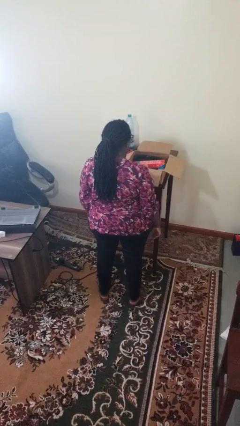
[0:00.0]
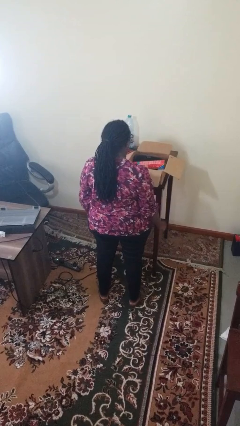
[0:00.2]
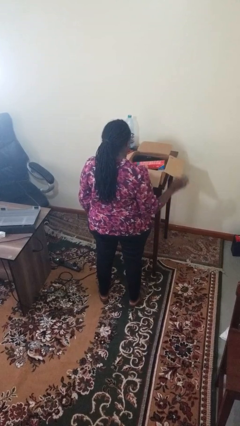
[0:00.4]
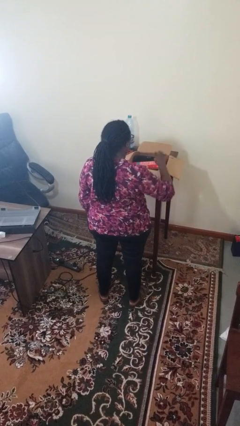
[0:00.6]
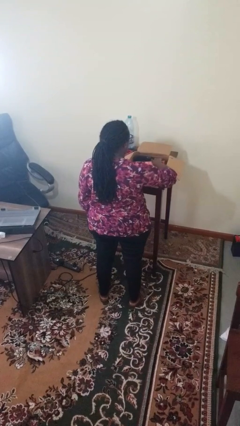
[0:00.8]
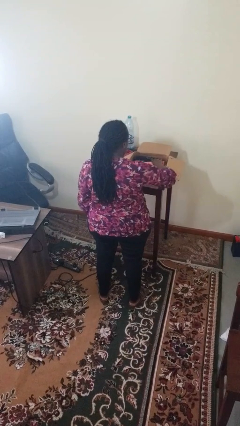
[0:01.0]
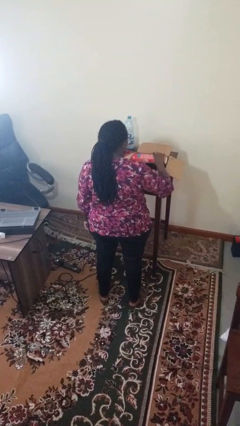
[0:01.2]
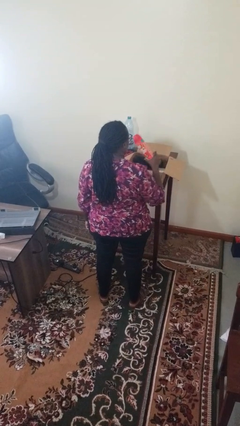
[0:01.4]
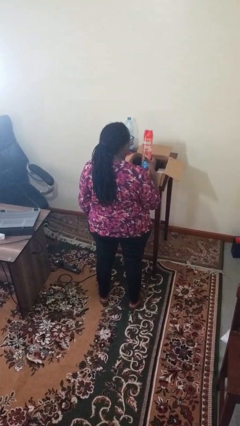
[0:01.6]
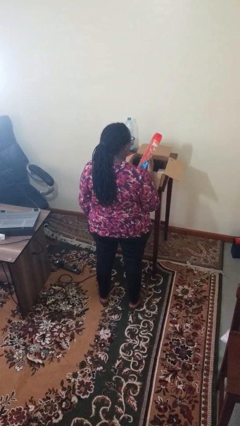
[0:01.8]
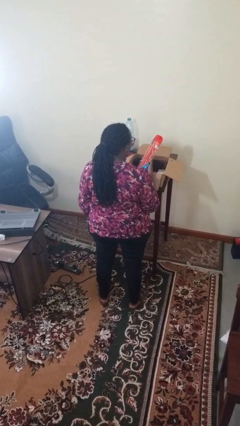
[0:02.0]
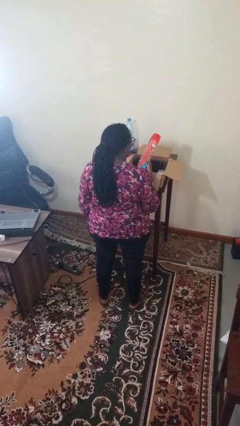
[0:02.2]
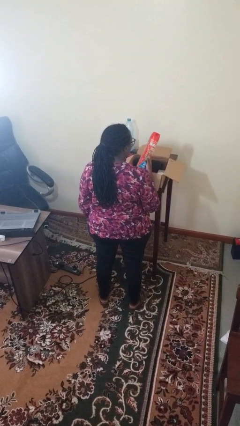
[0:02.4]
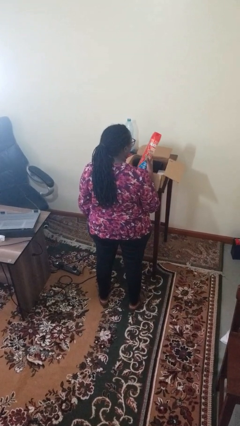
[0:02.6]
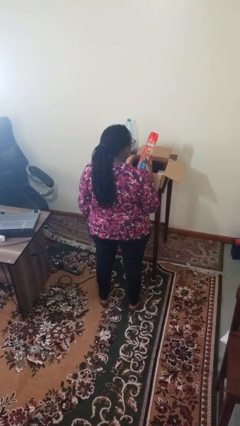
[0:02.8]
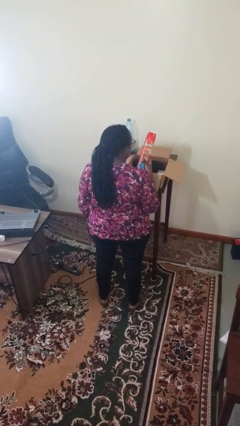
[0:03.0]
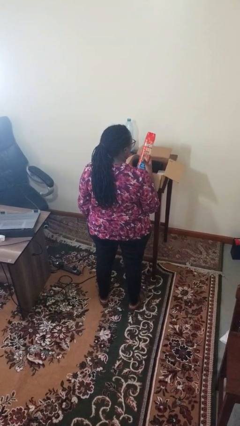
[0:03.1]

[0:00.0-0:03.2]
person takes object from box

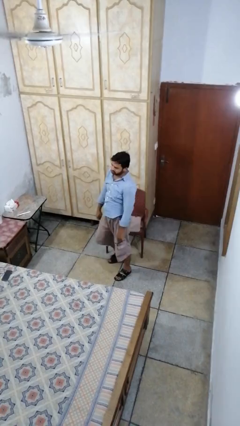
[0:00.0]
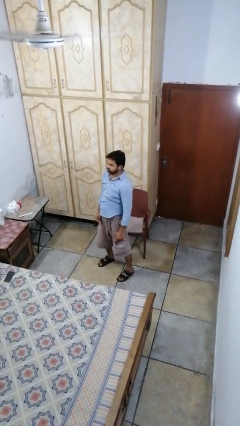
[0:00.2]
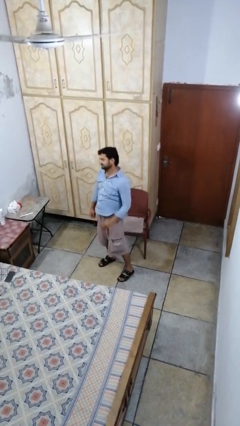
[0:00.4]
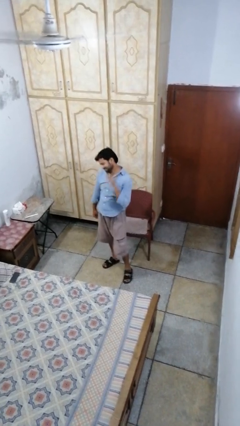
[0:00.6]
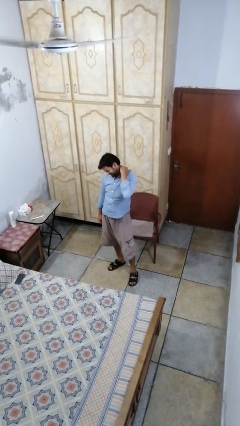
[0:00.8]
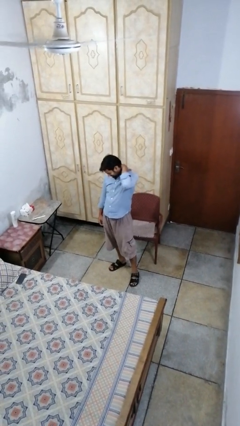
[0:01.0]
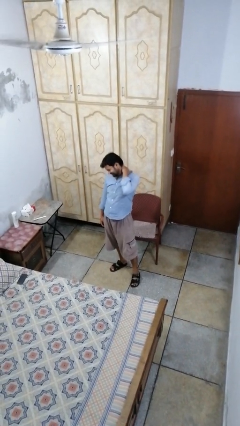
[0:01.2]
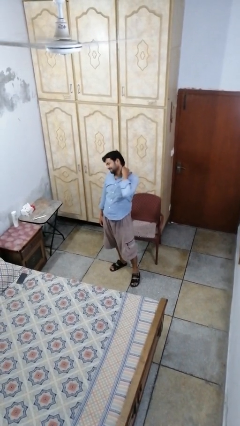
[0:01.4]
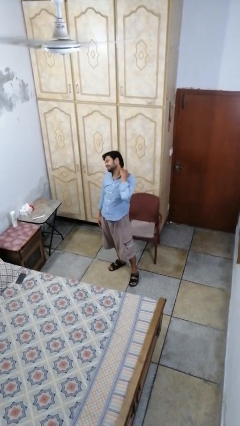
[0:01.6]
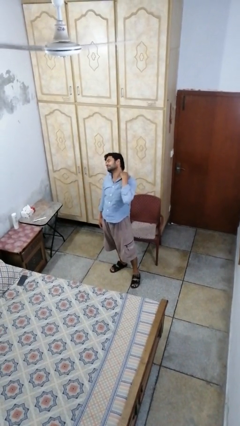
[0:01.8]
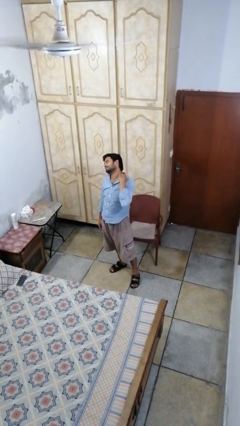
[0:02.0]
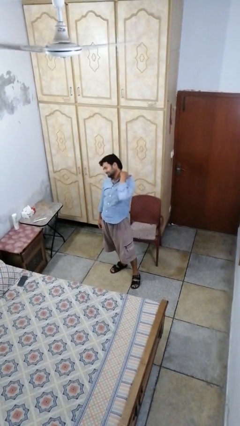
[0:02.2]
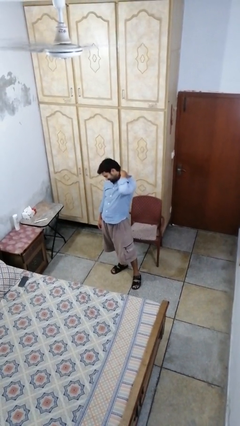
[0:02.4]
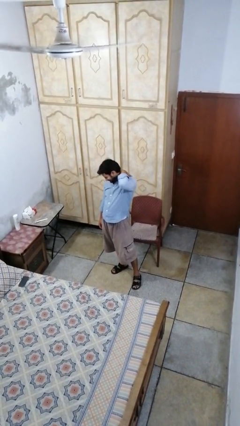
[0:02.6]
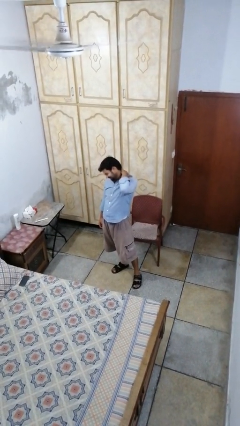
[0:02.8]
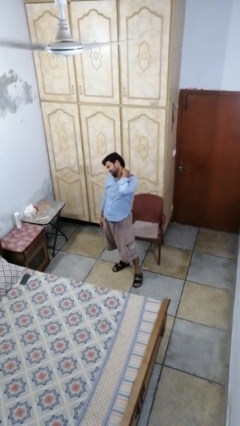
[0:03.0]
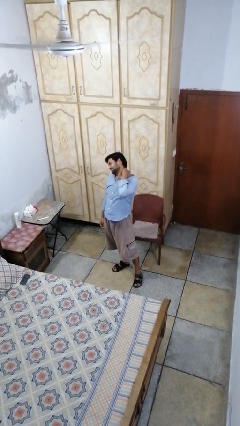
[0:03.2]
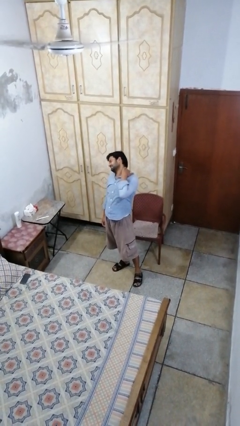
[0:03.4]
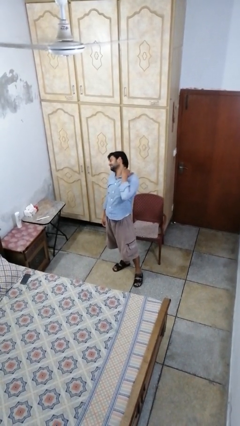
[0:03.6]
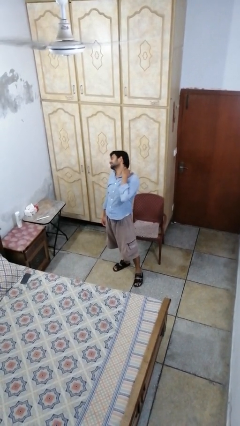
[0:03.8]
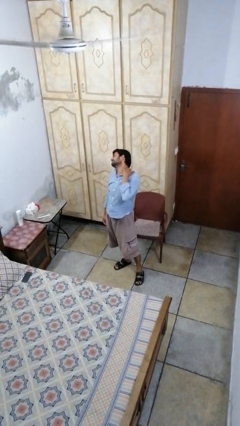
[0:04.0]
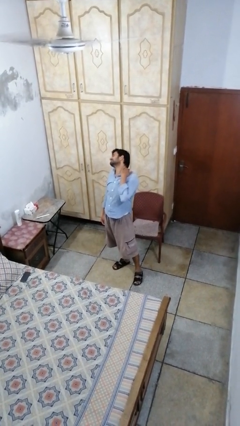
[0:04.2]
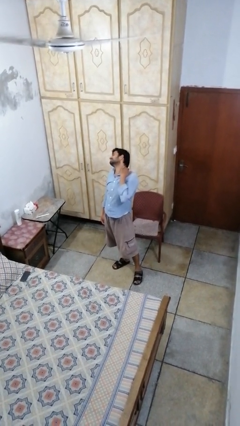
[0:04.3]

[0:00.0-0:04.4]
person rubs neck

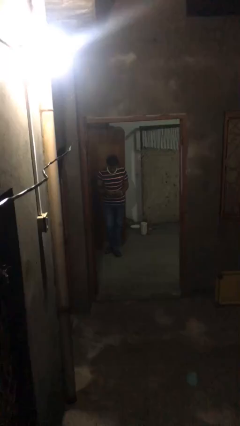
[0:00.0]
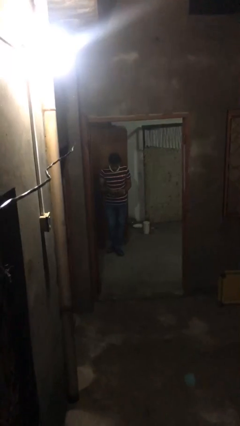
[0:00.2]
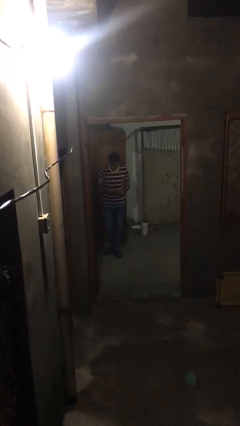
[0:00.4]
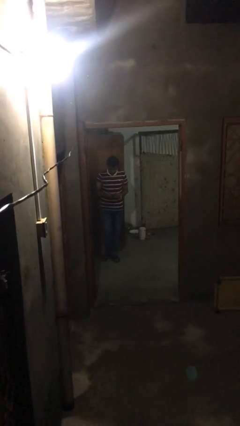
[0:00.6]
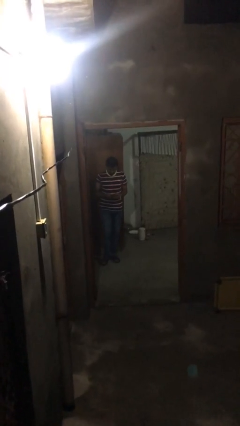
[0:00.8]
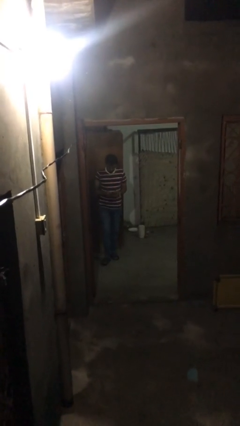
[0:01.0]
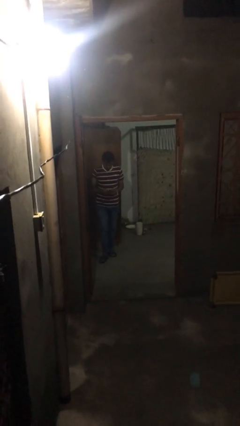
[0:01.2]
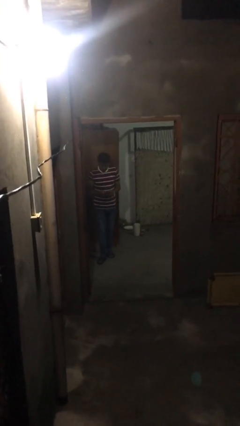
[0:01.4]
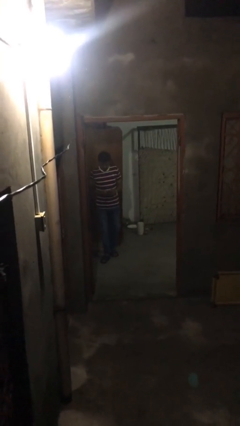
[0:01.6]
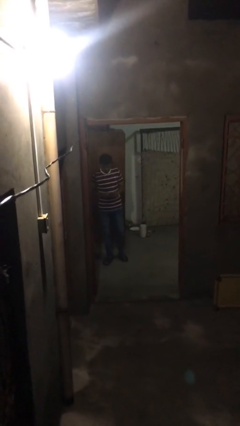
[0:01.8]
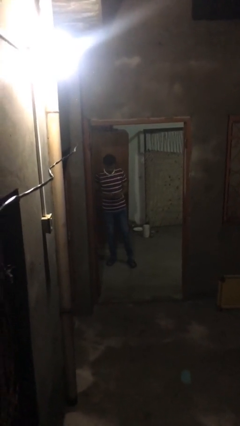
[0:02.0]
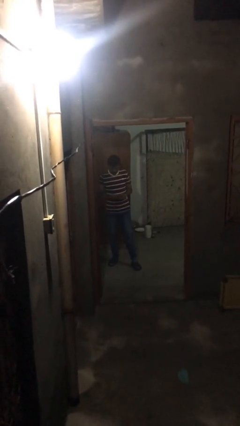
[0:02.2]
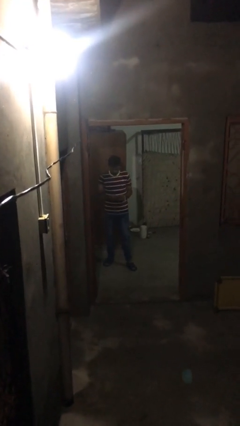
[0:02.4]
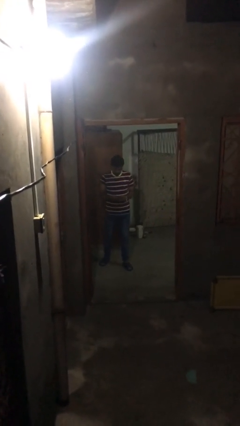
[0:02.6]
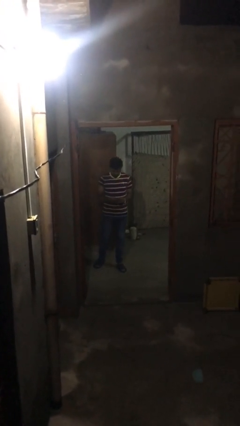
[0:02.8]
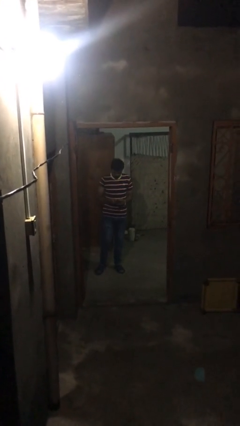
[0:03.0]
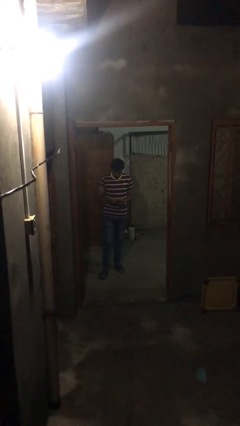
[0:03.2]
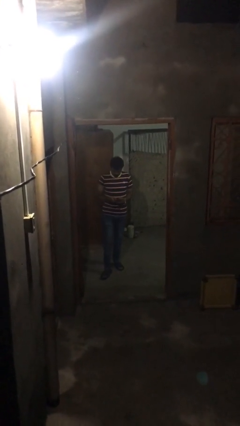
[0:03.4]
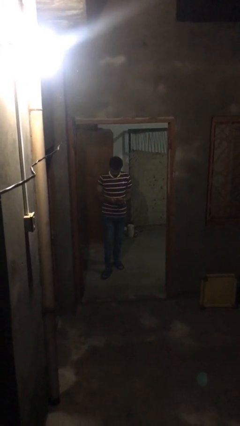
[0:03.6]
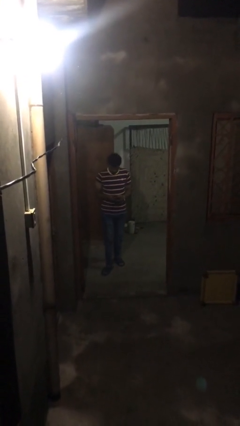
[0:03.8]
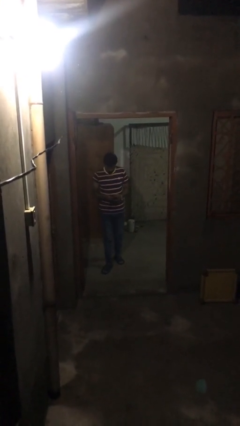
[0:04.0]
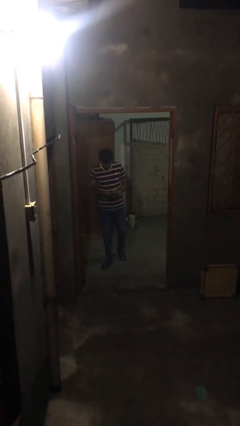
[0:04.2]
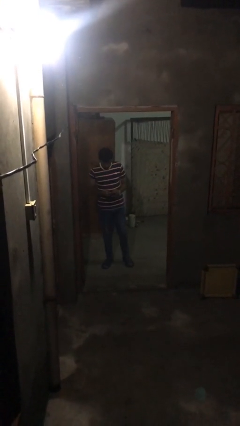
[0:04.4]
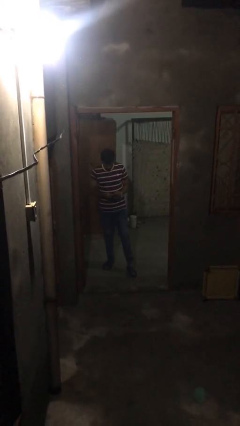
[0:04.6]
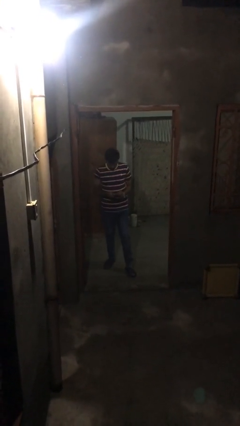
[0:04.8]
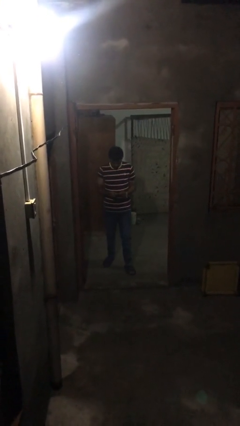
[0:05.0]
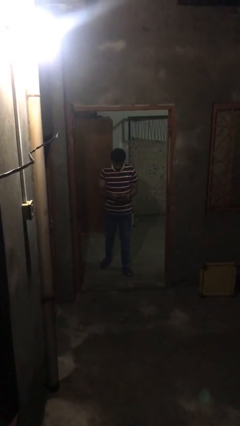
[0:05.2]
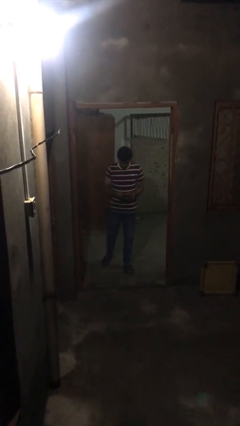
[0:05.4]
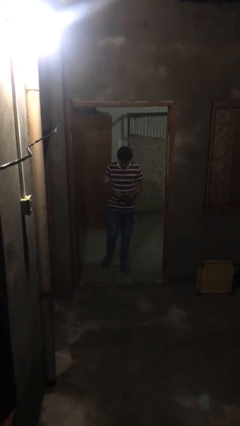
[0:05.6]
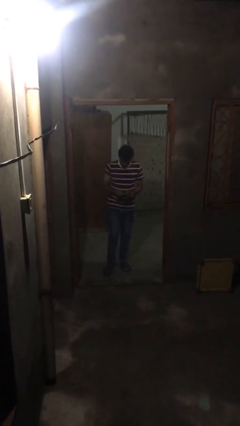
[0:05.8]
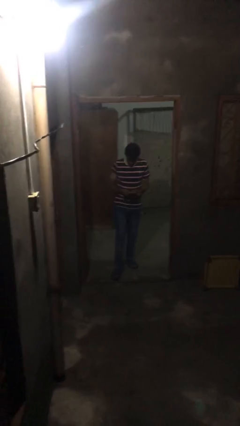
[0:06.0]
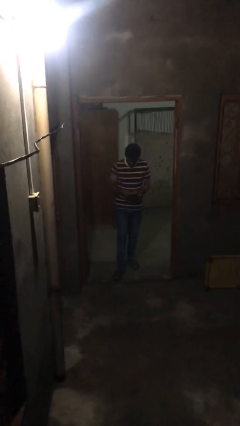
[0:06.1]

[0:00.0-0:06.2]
person texts on phone

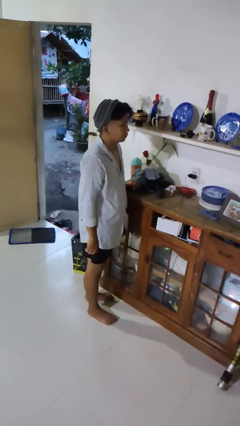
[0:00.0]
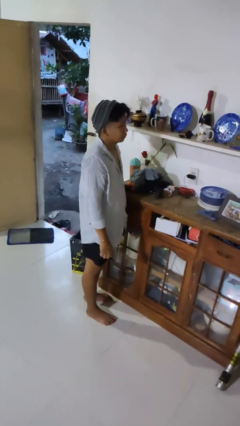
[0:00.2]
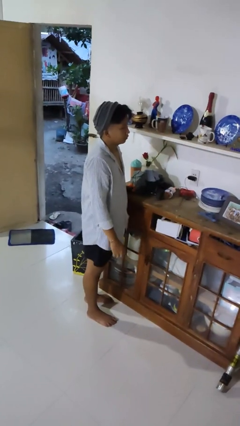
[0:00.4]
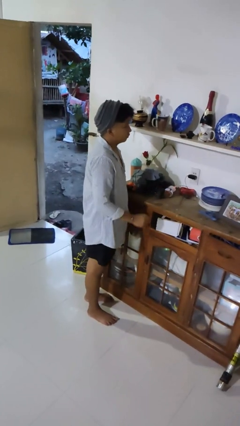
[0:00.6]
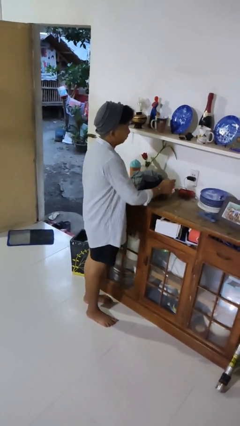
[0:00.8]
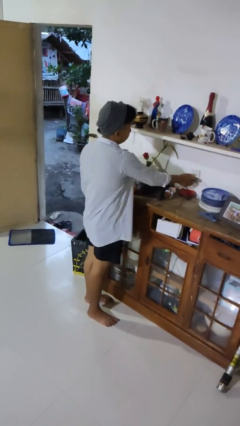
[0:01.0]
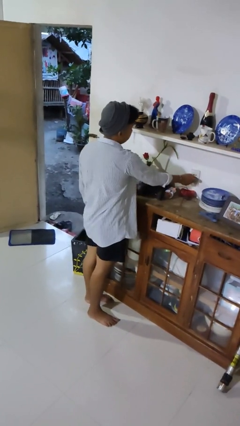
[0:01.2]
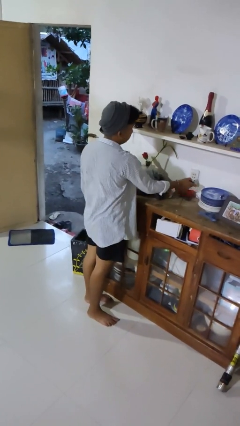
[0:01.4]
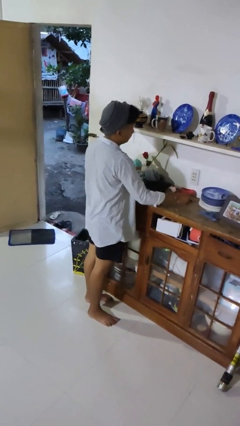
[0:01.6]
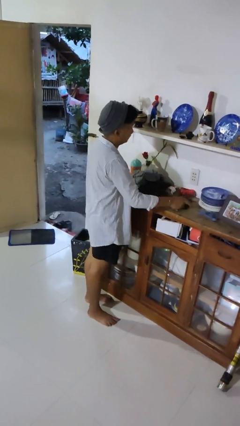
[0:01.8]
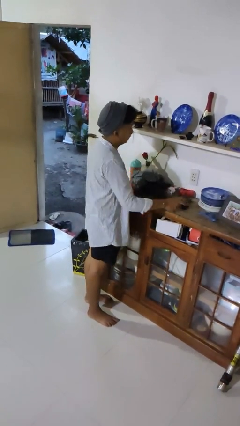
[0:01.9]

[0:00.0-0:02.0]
person unplugs from electrical socket

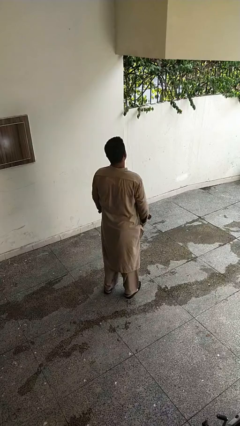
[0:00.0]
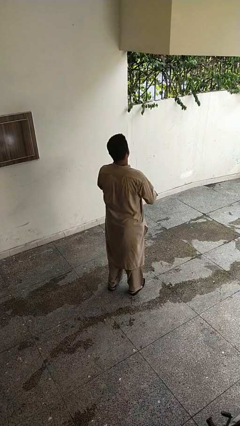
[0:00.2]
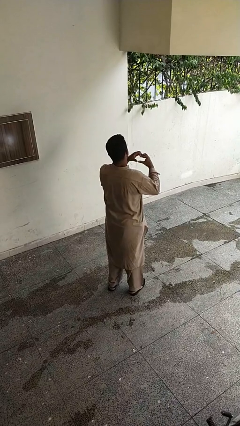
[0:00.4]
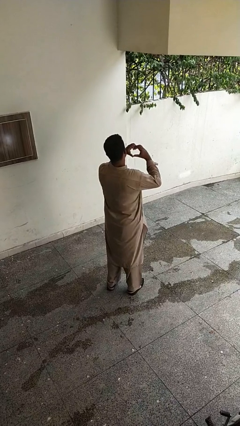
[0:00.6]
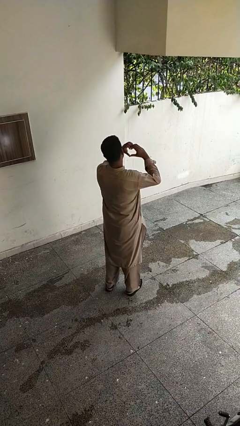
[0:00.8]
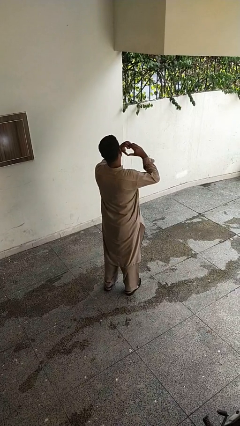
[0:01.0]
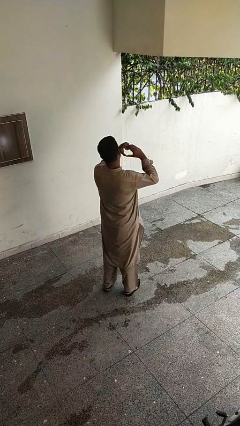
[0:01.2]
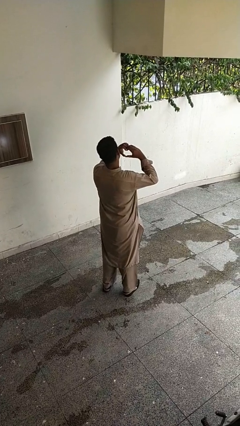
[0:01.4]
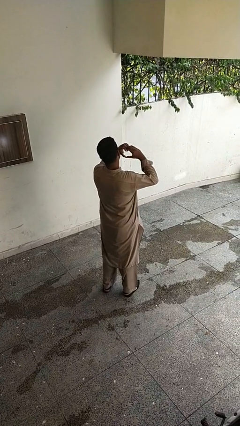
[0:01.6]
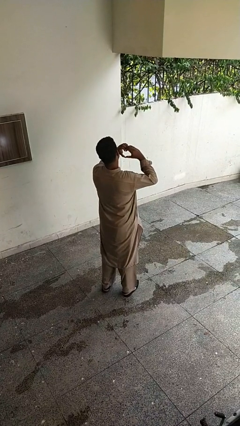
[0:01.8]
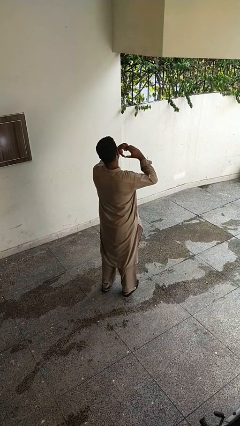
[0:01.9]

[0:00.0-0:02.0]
person gestures heart
